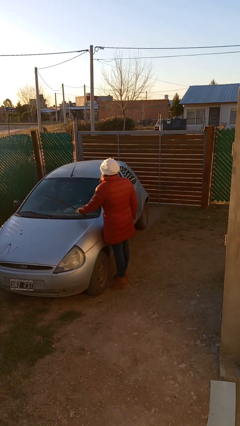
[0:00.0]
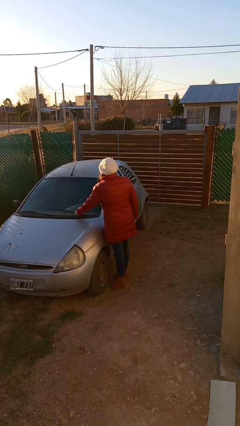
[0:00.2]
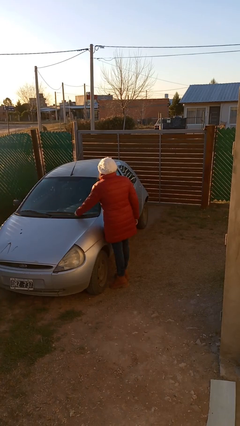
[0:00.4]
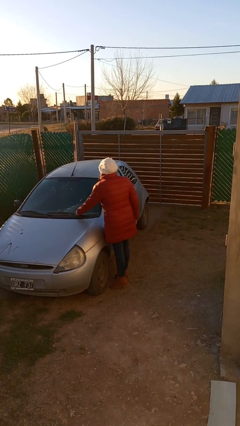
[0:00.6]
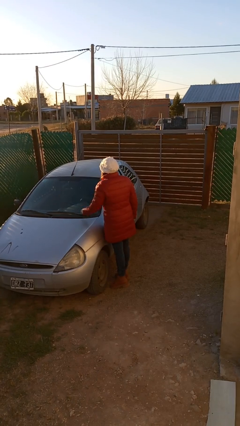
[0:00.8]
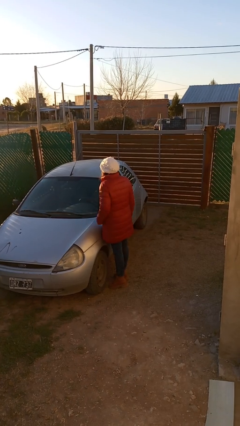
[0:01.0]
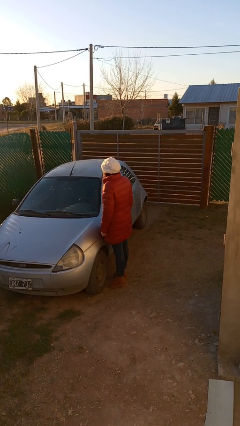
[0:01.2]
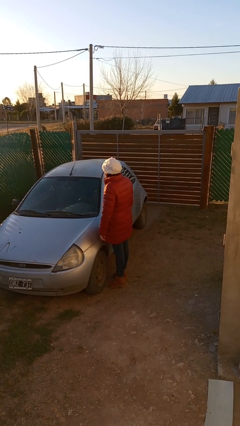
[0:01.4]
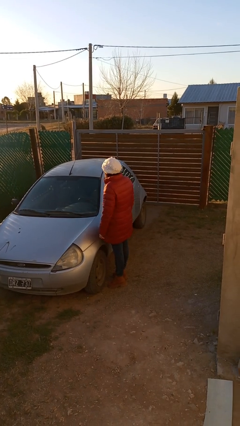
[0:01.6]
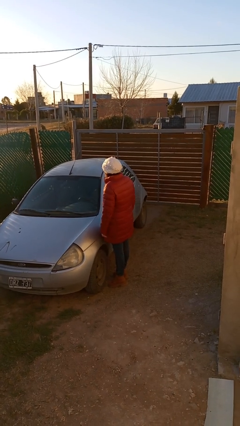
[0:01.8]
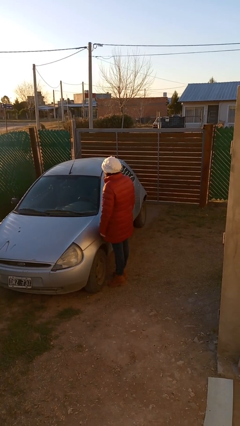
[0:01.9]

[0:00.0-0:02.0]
person flips down car wipers

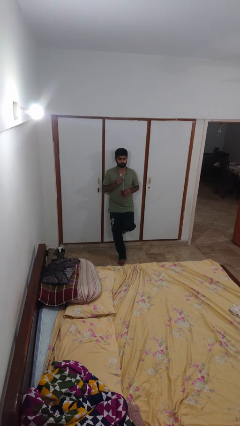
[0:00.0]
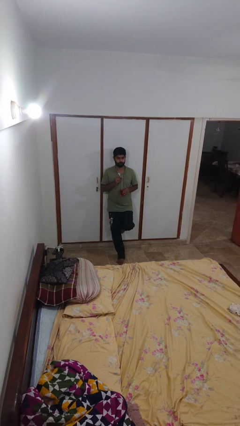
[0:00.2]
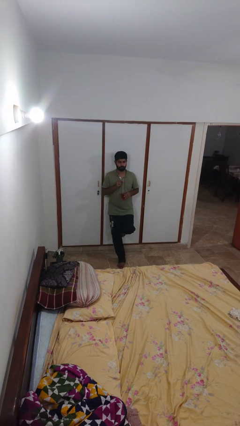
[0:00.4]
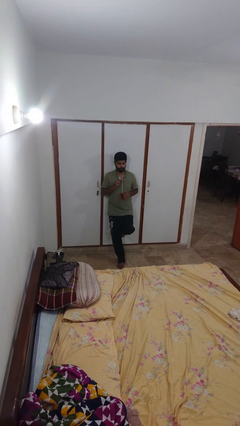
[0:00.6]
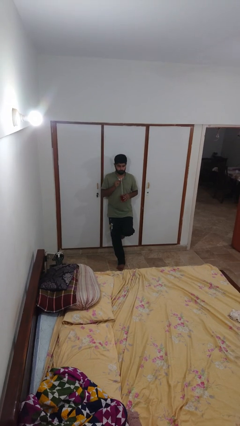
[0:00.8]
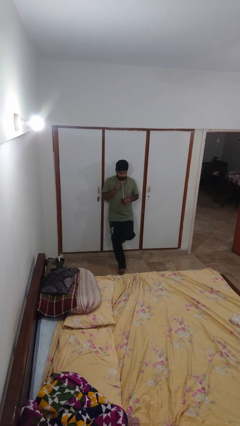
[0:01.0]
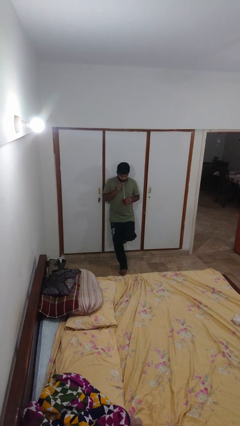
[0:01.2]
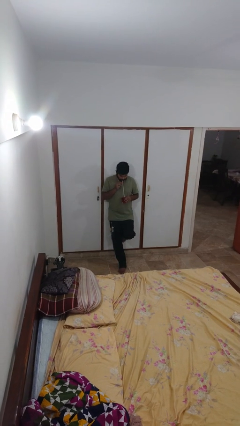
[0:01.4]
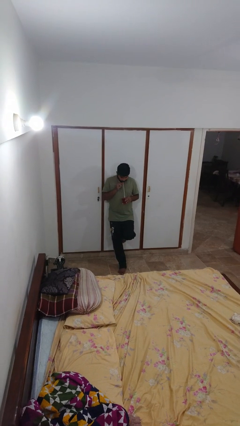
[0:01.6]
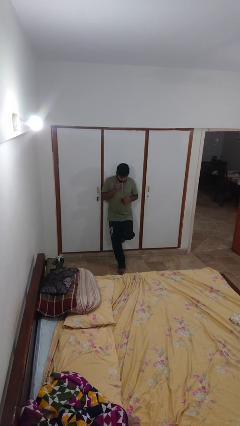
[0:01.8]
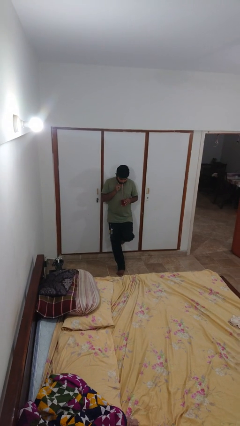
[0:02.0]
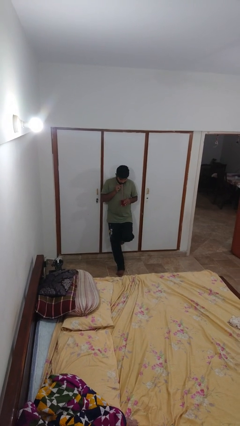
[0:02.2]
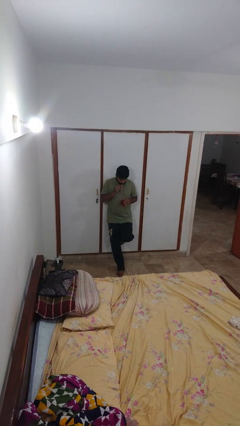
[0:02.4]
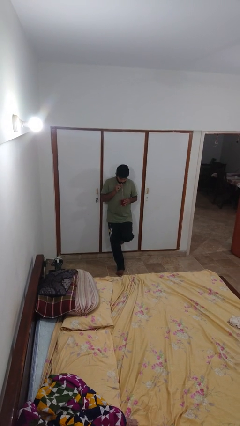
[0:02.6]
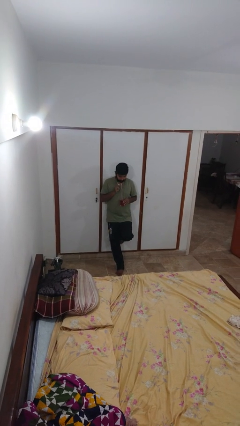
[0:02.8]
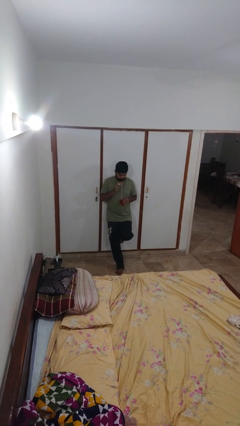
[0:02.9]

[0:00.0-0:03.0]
person drinks from straw

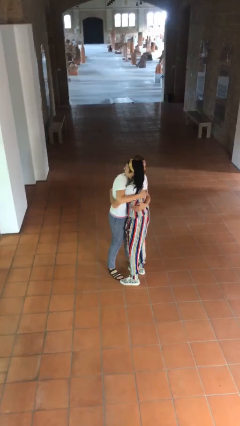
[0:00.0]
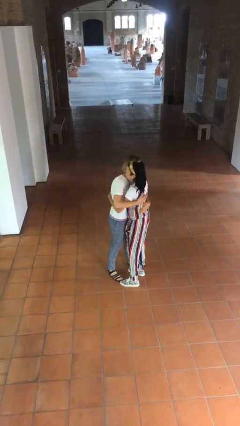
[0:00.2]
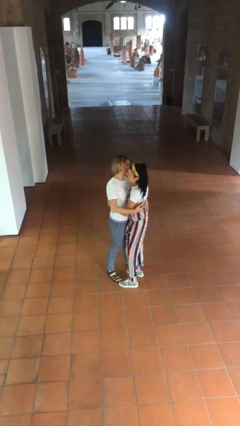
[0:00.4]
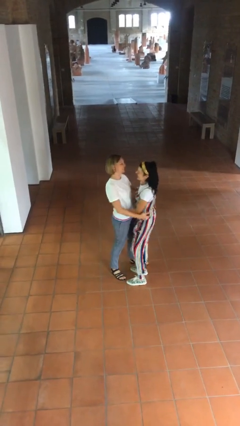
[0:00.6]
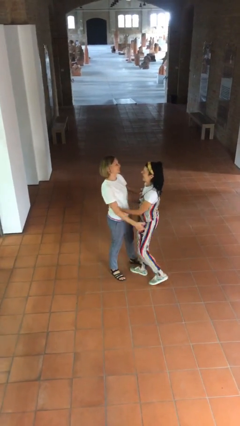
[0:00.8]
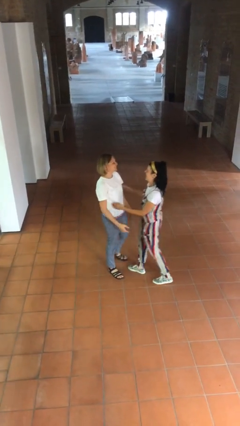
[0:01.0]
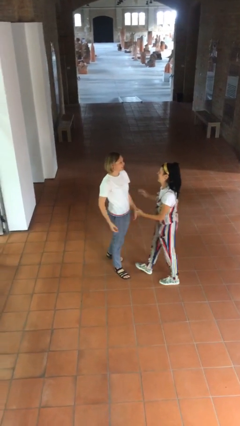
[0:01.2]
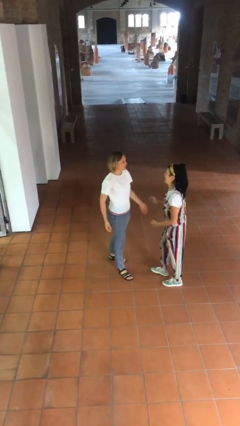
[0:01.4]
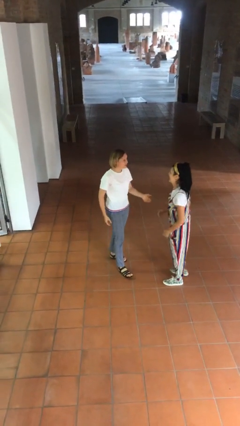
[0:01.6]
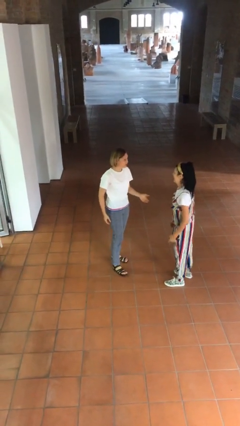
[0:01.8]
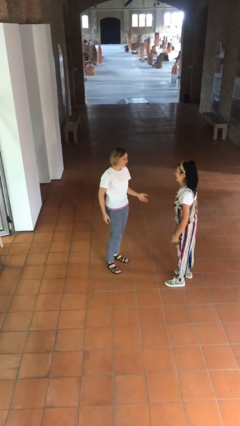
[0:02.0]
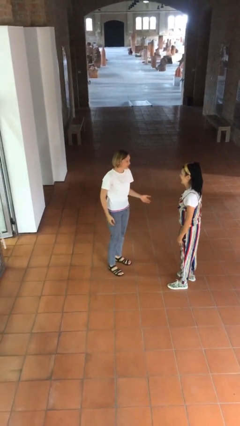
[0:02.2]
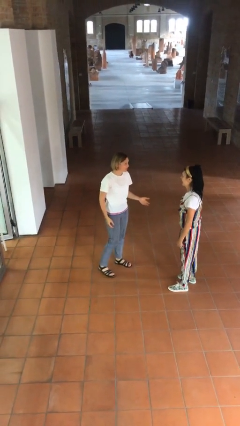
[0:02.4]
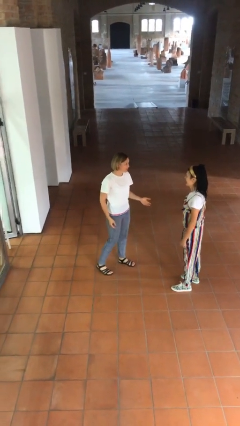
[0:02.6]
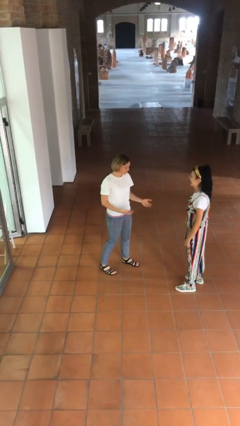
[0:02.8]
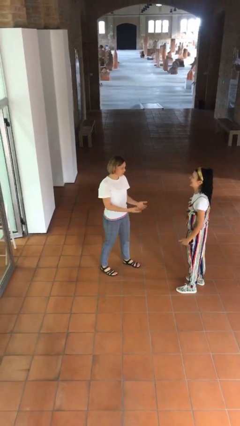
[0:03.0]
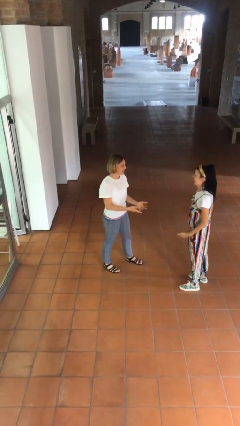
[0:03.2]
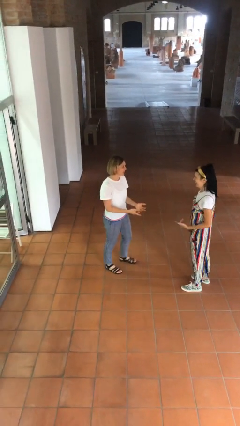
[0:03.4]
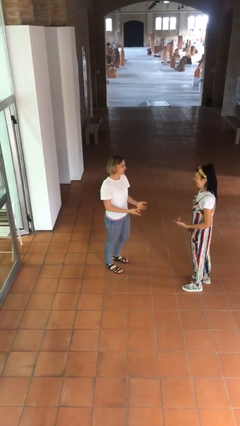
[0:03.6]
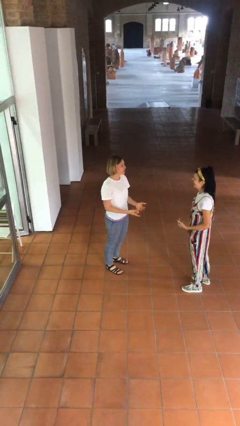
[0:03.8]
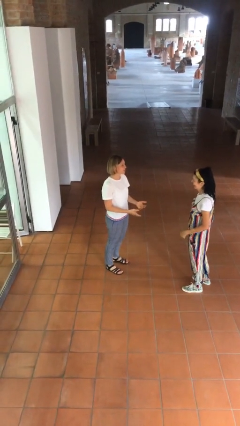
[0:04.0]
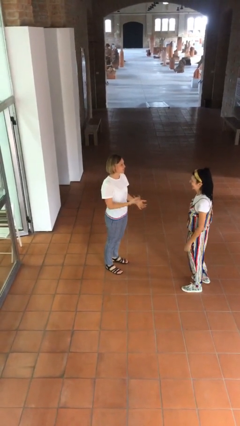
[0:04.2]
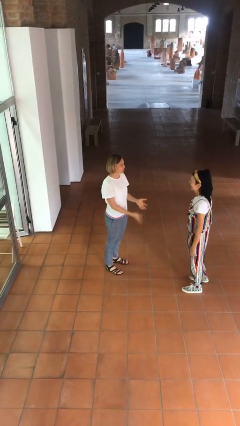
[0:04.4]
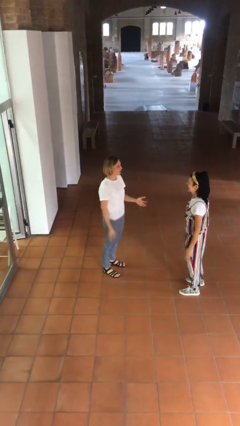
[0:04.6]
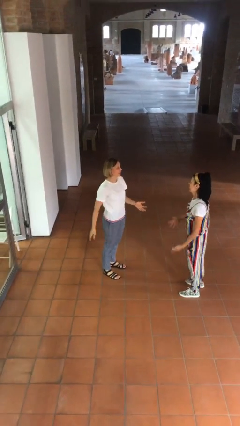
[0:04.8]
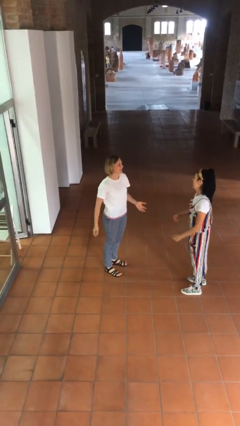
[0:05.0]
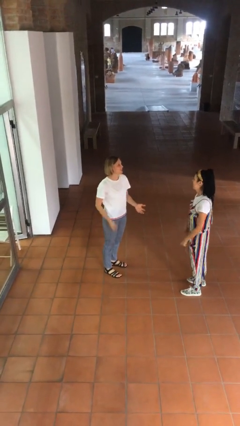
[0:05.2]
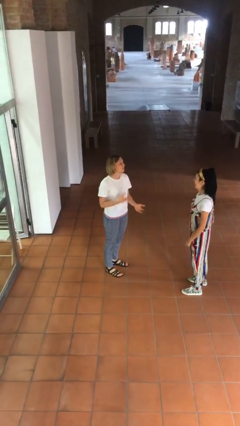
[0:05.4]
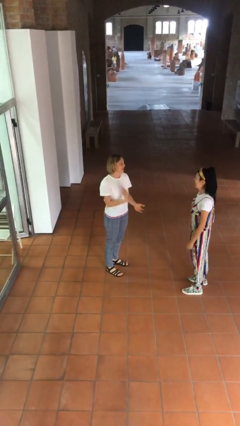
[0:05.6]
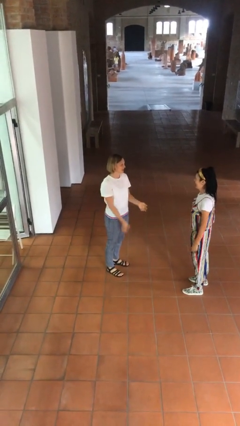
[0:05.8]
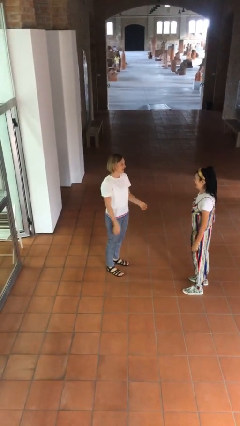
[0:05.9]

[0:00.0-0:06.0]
person talks to person

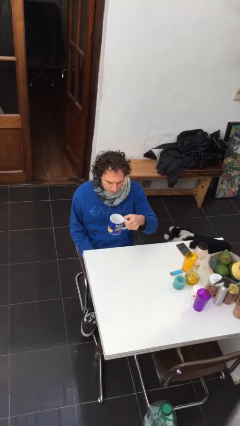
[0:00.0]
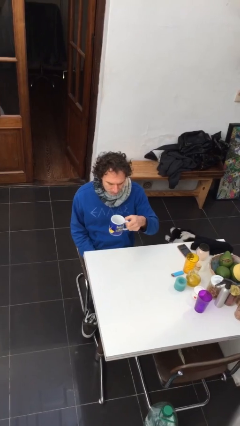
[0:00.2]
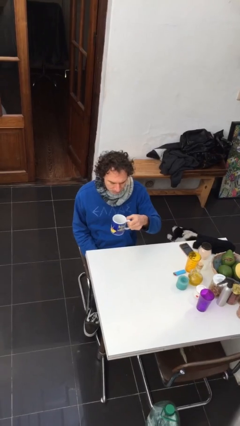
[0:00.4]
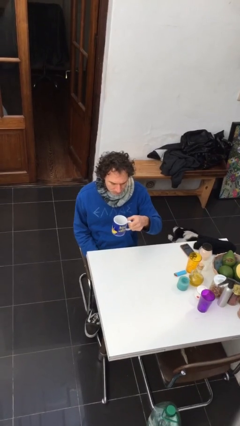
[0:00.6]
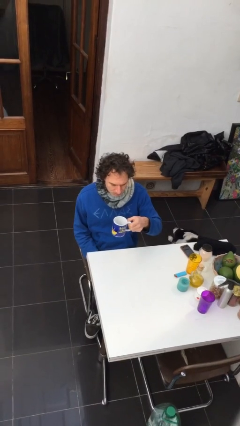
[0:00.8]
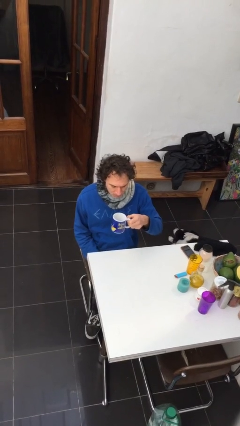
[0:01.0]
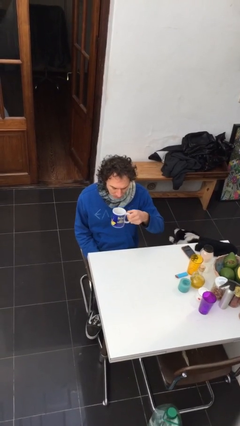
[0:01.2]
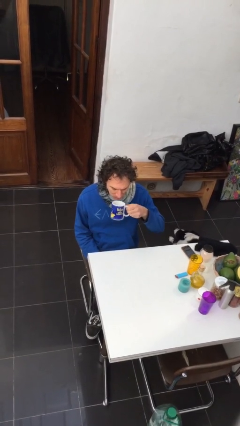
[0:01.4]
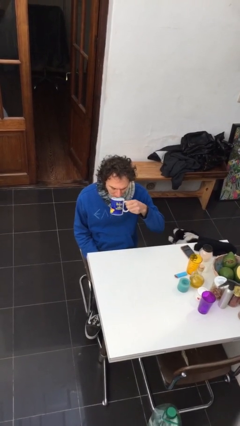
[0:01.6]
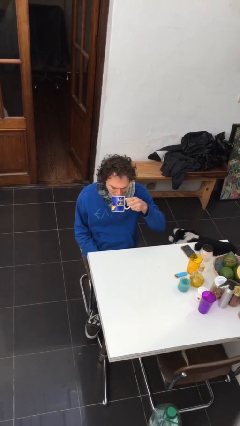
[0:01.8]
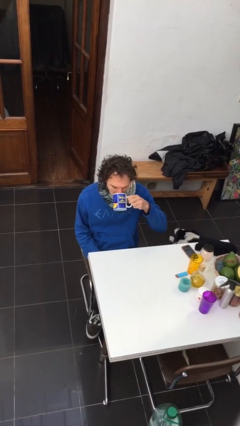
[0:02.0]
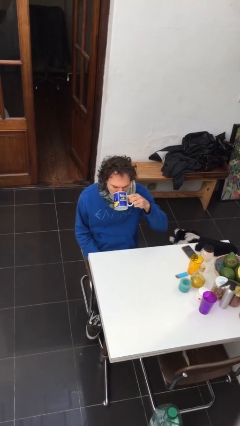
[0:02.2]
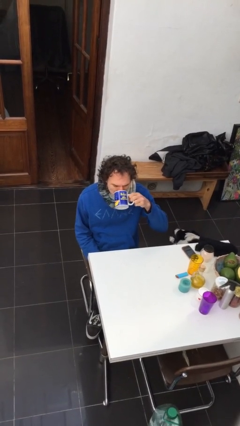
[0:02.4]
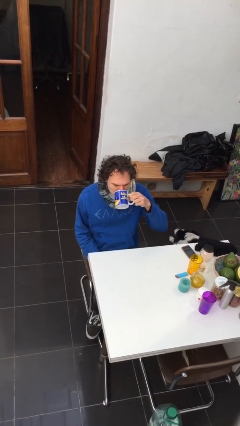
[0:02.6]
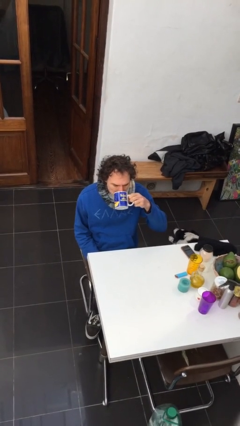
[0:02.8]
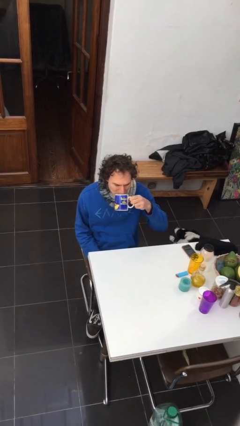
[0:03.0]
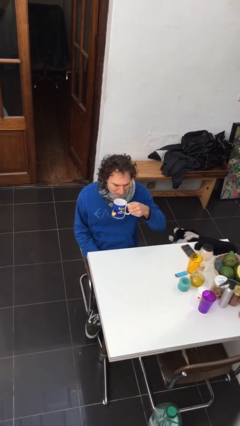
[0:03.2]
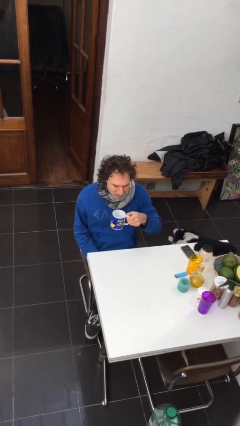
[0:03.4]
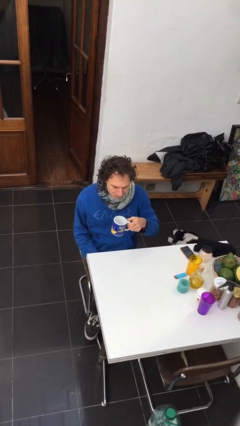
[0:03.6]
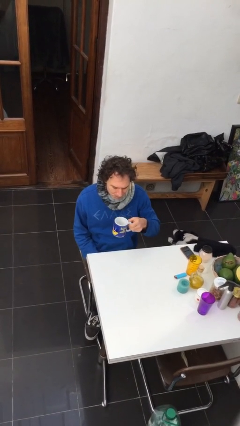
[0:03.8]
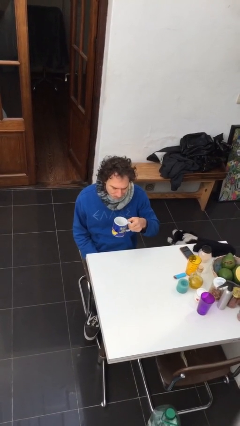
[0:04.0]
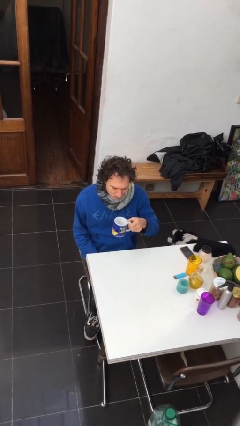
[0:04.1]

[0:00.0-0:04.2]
person drinks from mug

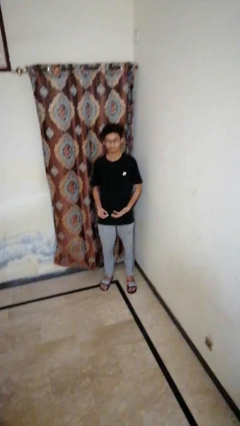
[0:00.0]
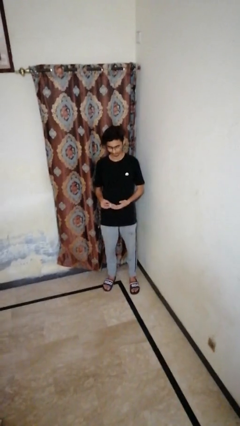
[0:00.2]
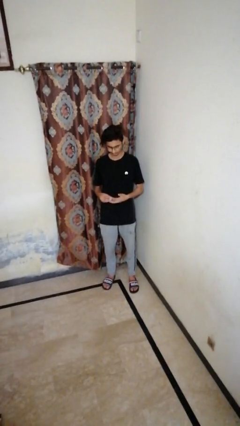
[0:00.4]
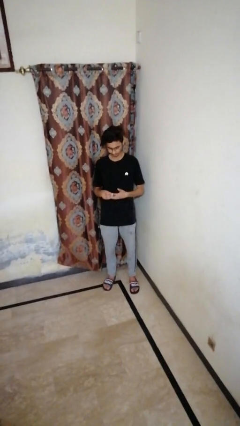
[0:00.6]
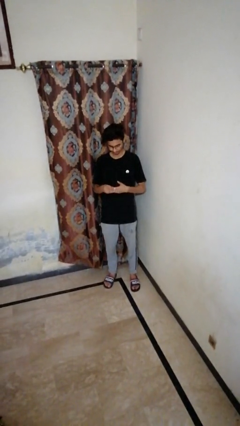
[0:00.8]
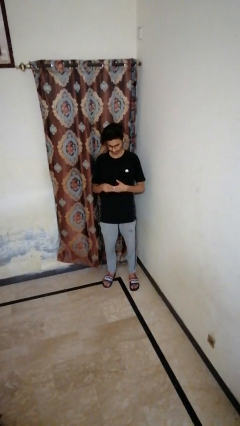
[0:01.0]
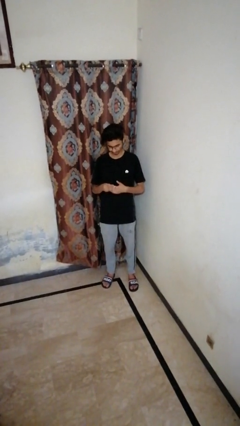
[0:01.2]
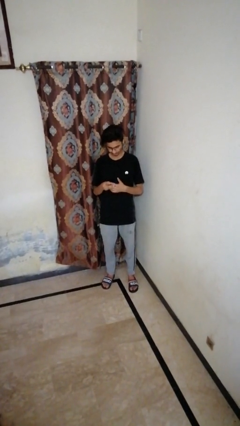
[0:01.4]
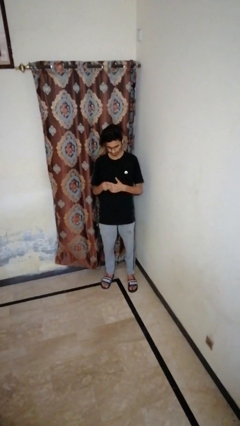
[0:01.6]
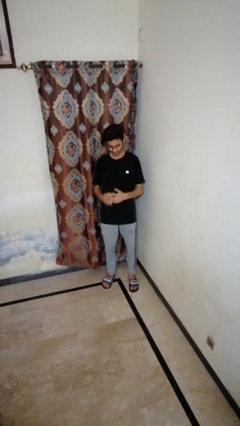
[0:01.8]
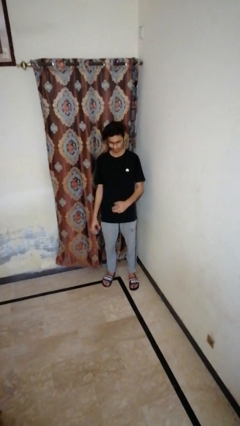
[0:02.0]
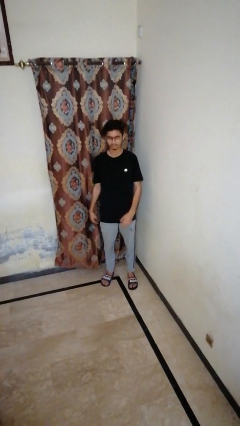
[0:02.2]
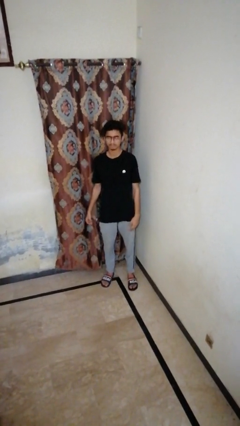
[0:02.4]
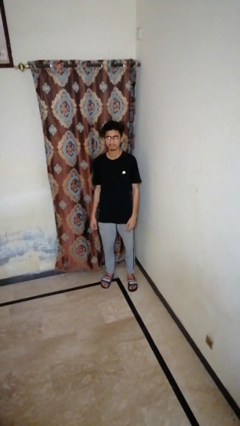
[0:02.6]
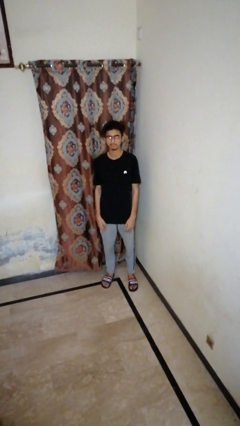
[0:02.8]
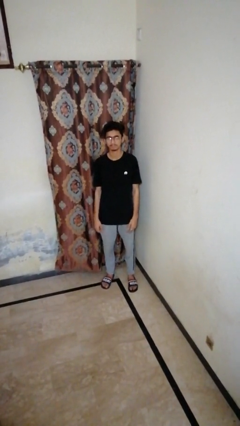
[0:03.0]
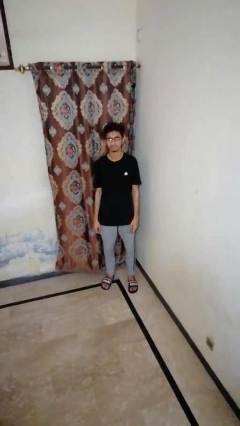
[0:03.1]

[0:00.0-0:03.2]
person puts on ring
